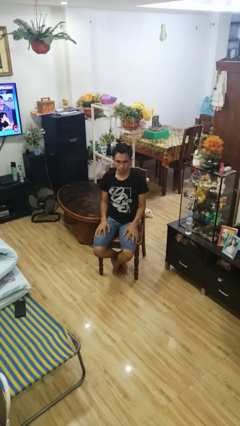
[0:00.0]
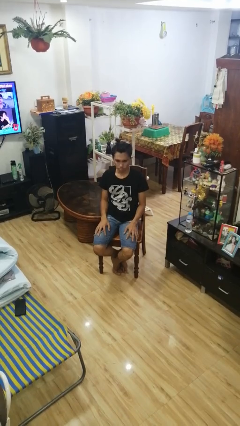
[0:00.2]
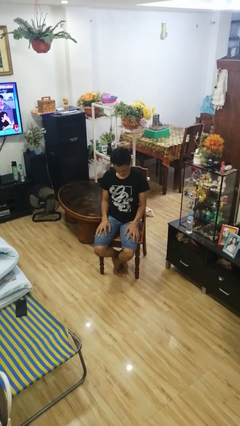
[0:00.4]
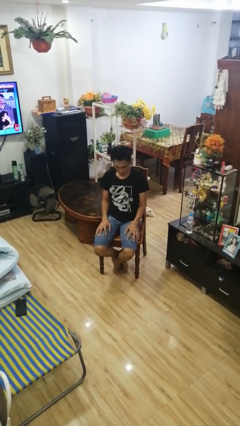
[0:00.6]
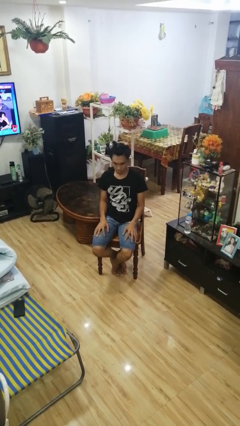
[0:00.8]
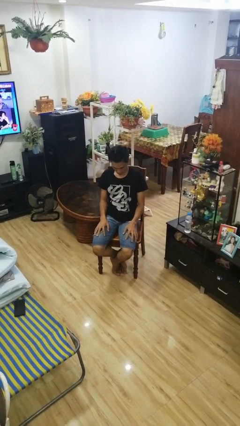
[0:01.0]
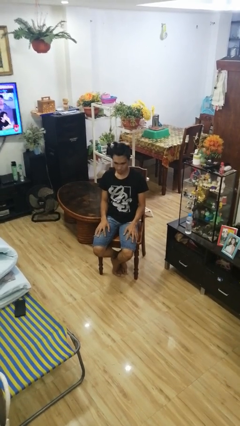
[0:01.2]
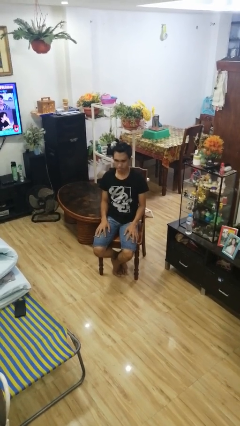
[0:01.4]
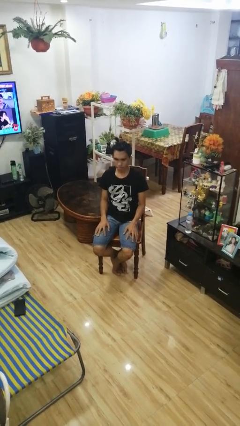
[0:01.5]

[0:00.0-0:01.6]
person nods head

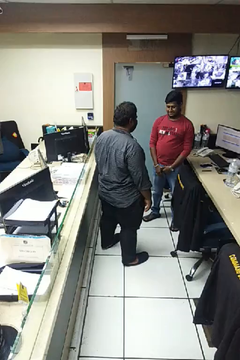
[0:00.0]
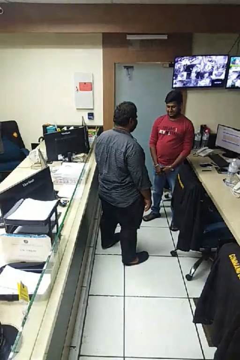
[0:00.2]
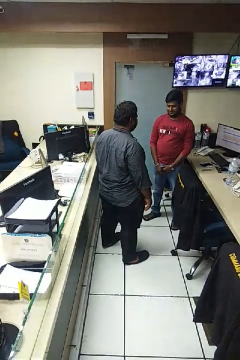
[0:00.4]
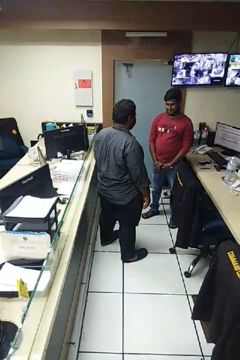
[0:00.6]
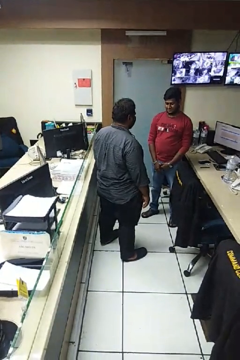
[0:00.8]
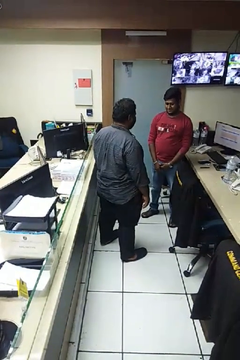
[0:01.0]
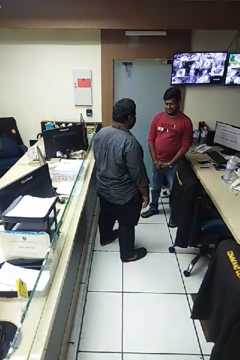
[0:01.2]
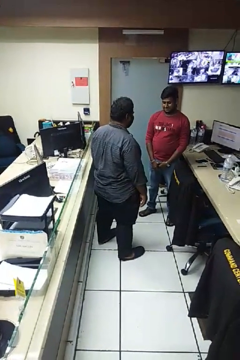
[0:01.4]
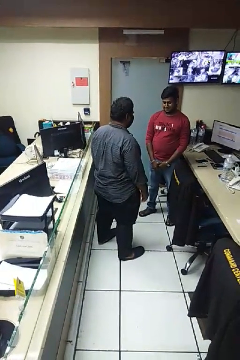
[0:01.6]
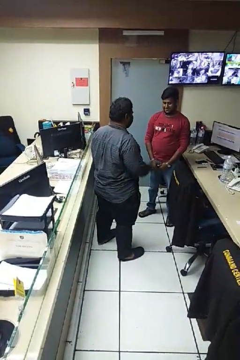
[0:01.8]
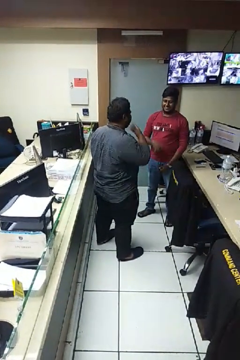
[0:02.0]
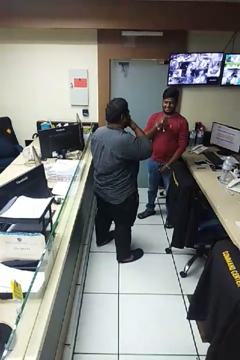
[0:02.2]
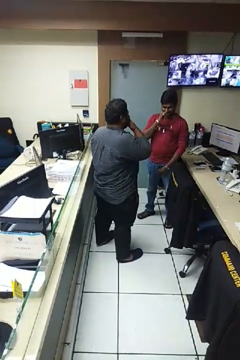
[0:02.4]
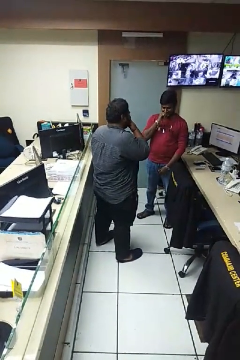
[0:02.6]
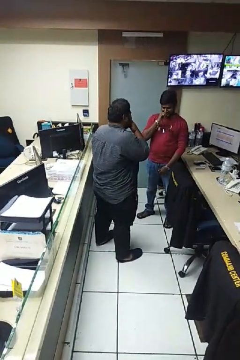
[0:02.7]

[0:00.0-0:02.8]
person laughs with person

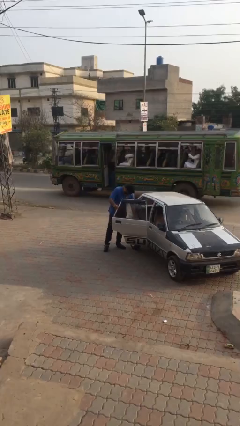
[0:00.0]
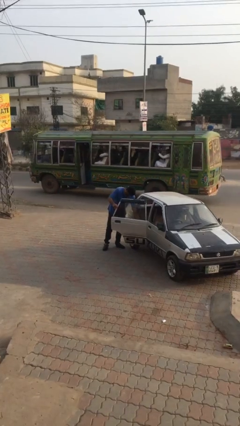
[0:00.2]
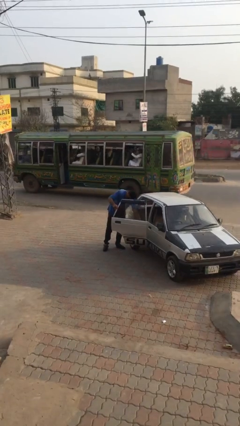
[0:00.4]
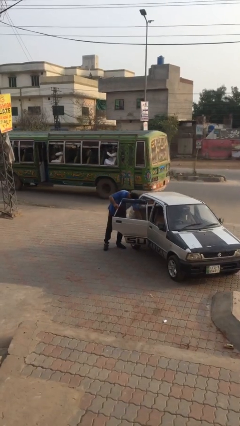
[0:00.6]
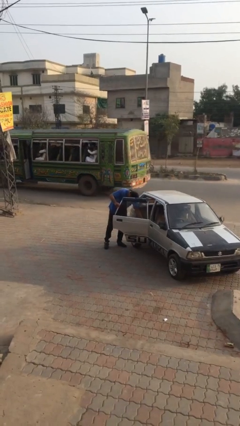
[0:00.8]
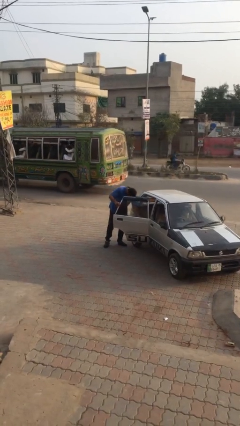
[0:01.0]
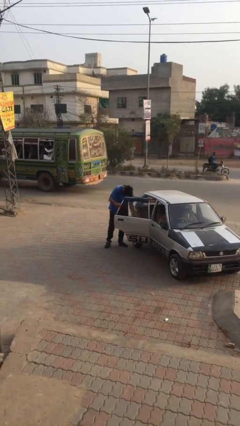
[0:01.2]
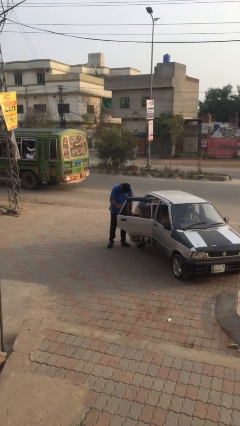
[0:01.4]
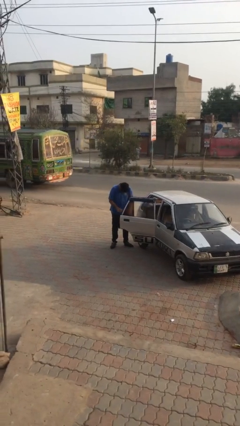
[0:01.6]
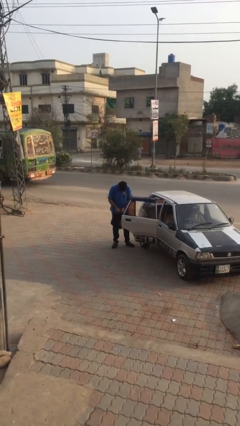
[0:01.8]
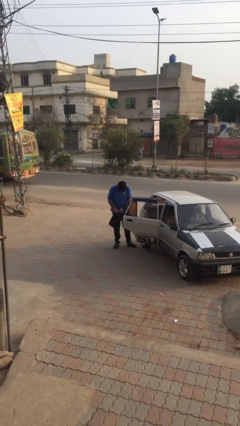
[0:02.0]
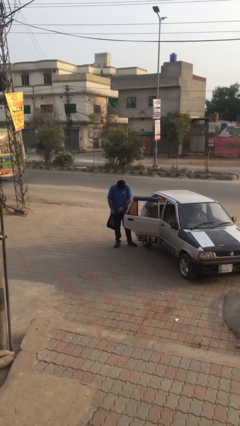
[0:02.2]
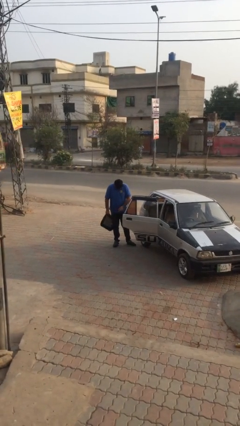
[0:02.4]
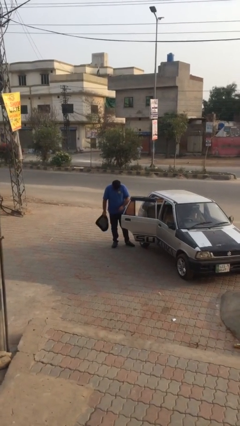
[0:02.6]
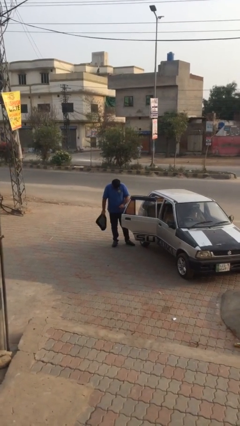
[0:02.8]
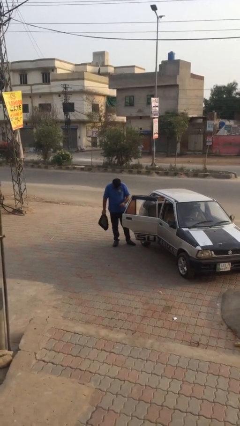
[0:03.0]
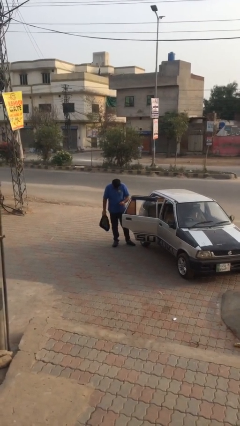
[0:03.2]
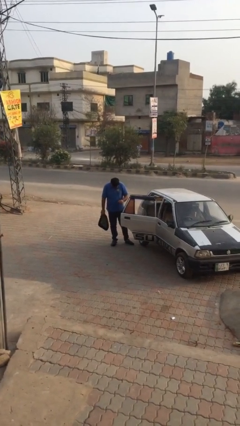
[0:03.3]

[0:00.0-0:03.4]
person unloads car

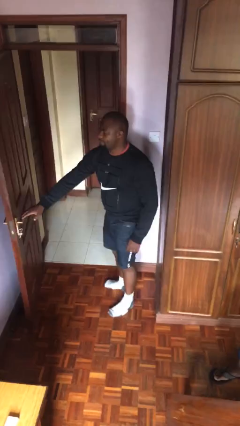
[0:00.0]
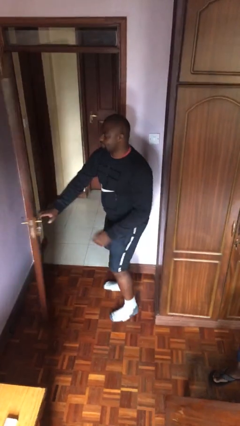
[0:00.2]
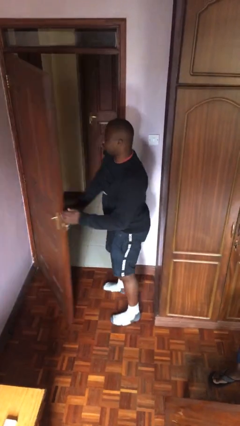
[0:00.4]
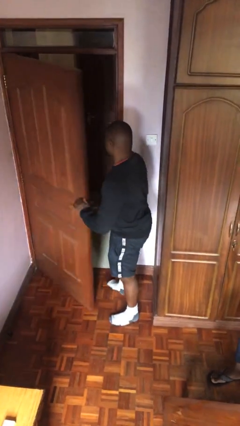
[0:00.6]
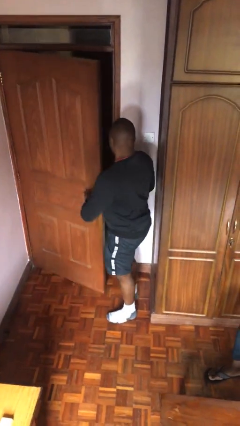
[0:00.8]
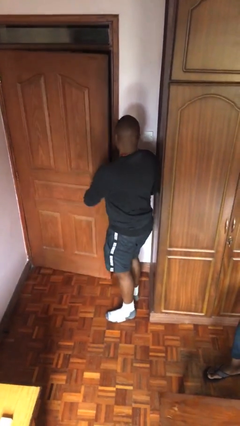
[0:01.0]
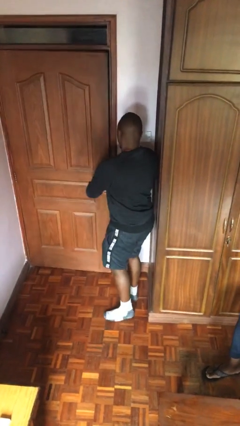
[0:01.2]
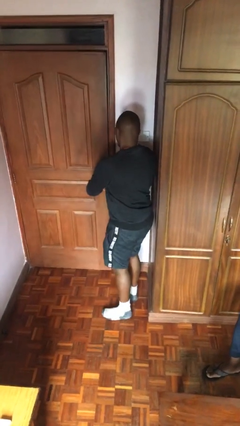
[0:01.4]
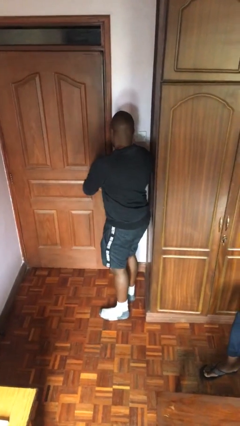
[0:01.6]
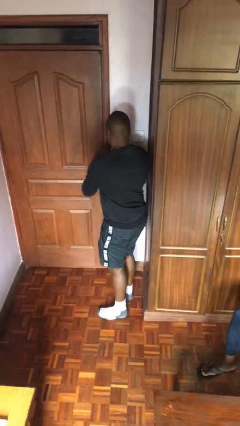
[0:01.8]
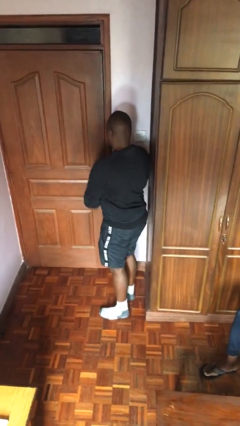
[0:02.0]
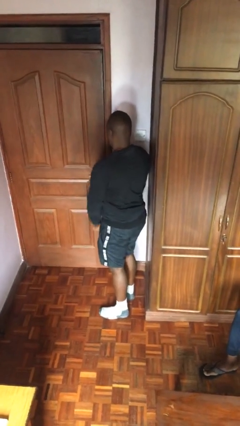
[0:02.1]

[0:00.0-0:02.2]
person closes facility door

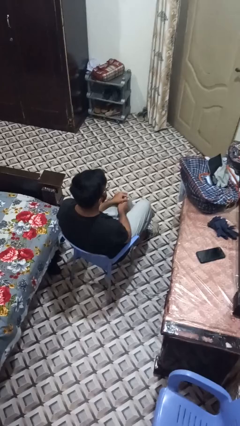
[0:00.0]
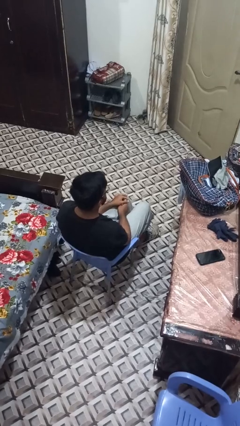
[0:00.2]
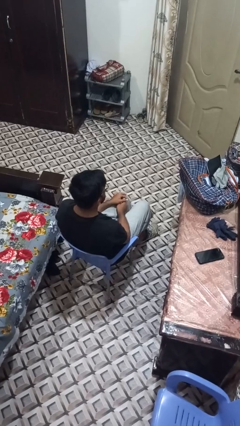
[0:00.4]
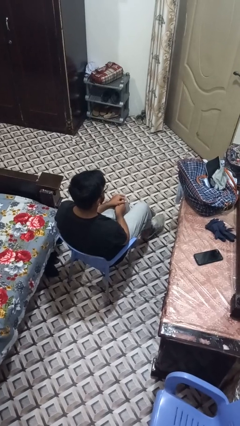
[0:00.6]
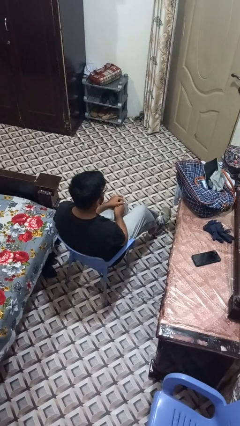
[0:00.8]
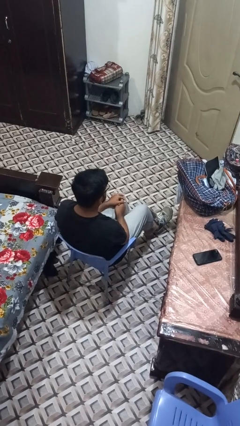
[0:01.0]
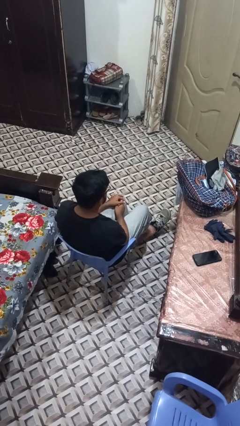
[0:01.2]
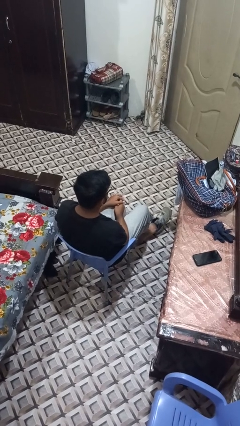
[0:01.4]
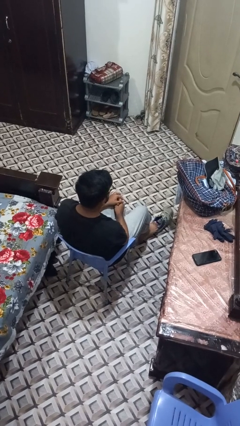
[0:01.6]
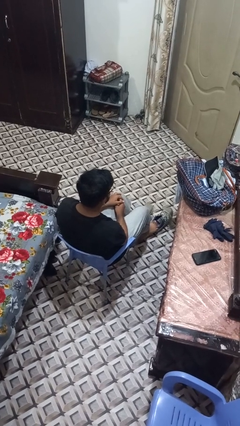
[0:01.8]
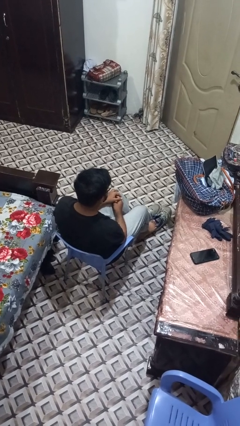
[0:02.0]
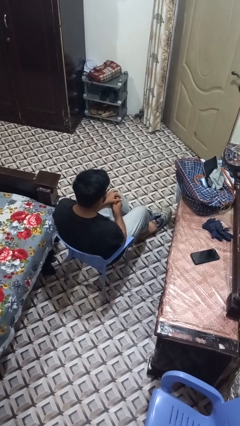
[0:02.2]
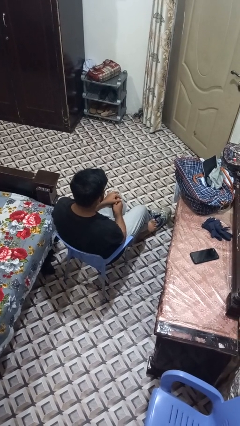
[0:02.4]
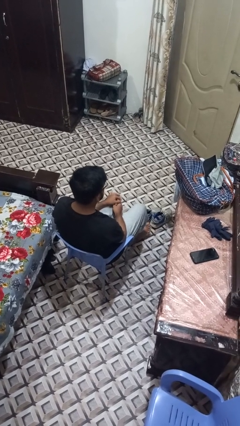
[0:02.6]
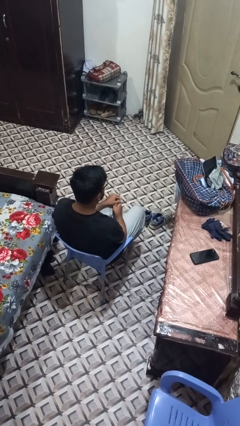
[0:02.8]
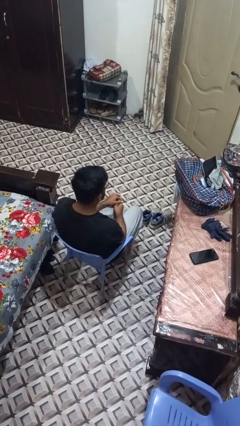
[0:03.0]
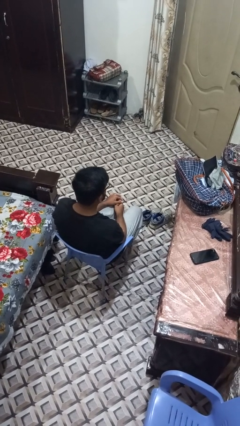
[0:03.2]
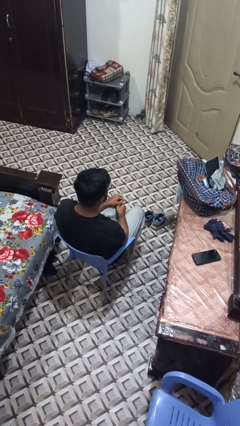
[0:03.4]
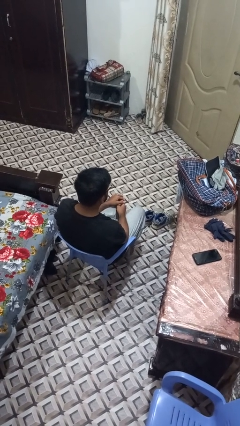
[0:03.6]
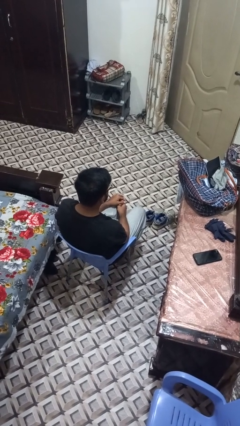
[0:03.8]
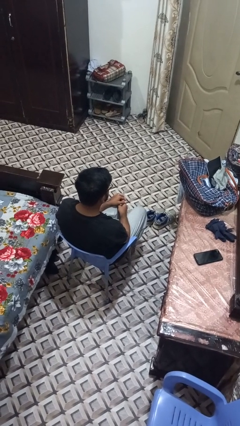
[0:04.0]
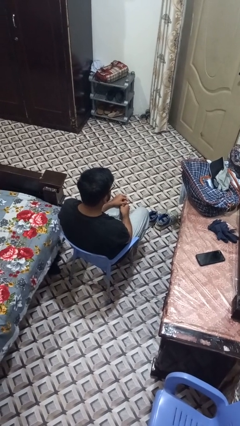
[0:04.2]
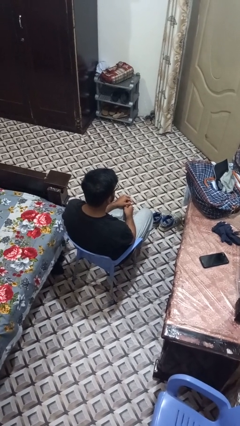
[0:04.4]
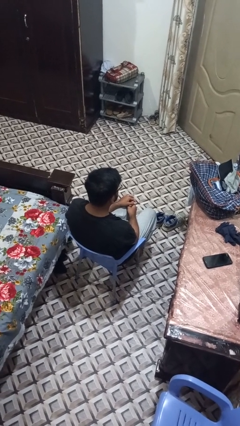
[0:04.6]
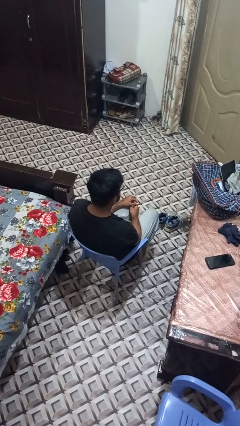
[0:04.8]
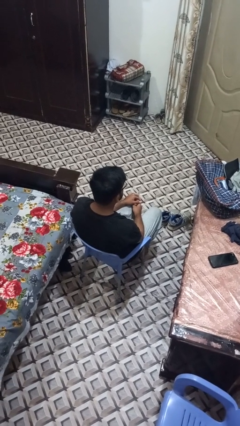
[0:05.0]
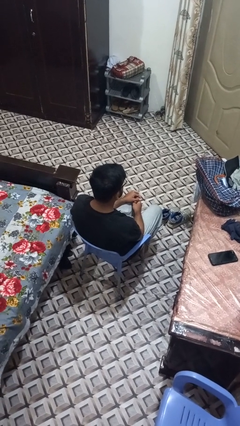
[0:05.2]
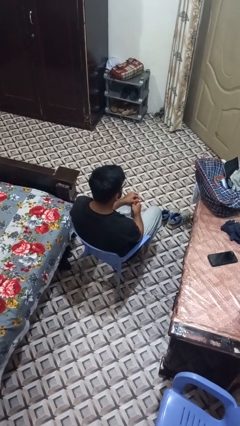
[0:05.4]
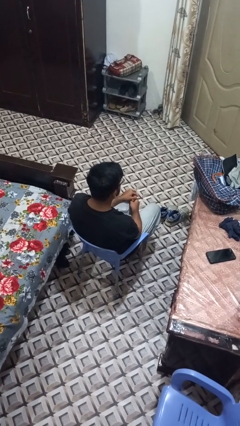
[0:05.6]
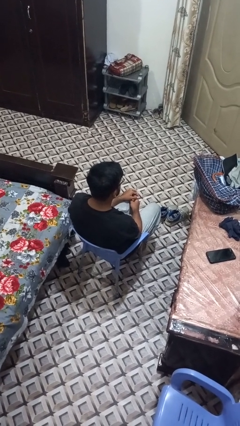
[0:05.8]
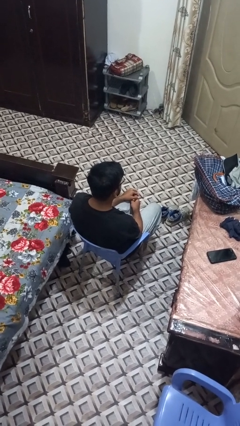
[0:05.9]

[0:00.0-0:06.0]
person takes off shoes

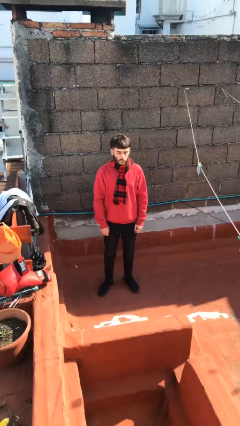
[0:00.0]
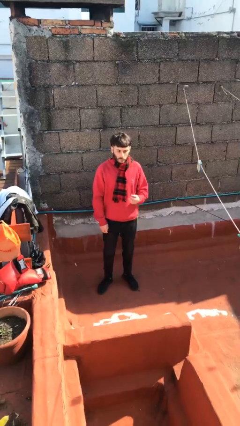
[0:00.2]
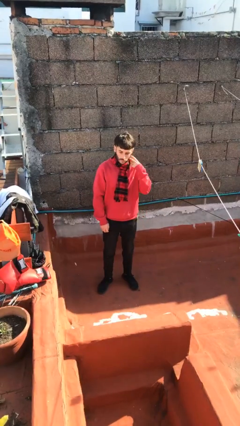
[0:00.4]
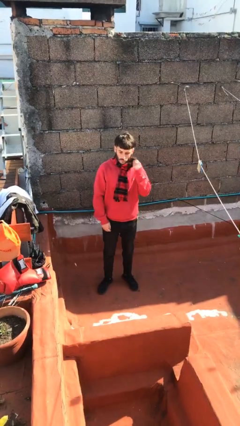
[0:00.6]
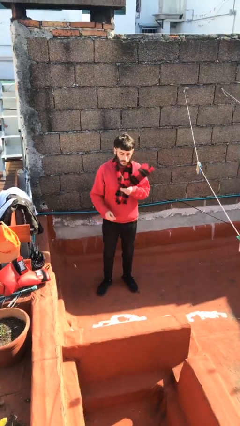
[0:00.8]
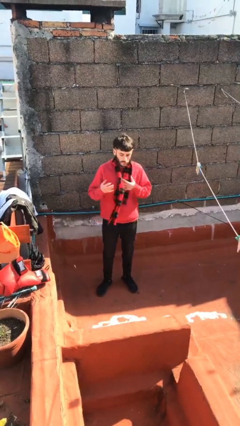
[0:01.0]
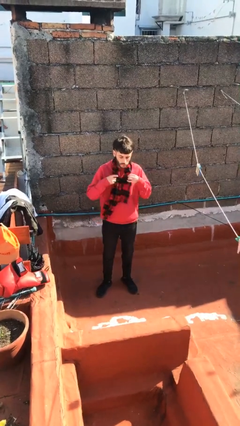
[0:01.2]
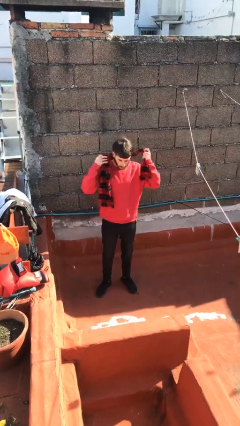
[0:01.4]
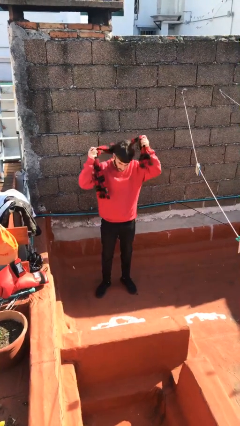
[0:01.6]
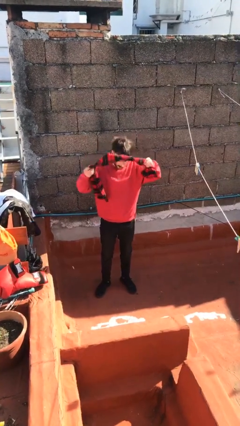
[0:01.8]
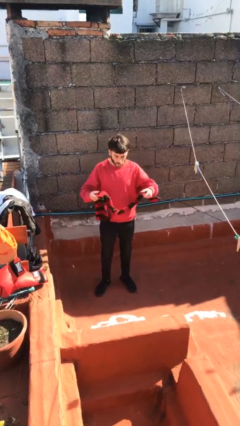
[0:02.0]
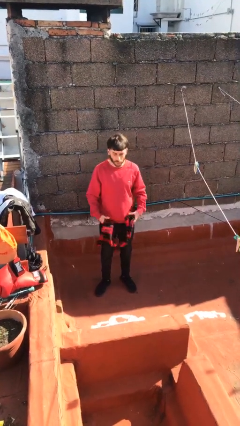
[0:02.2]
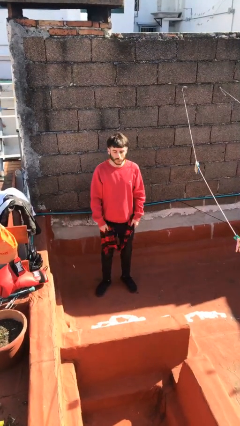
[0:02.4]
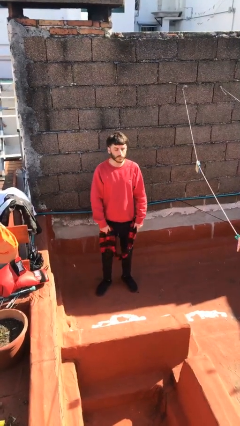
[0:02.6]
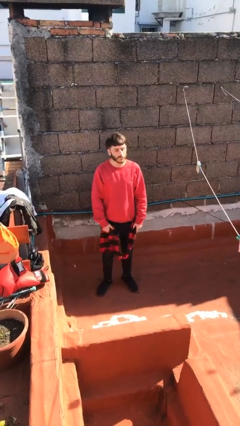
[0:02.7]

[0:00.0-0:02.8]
person takes off scarf
